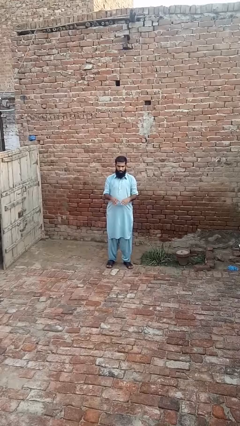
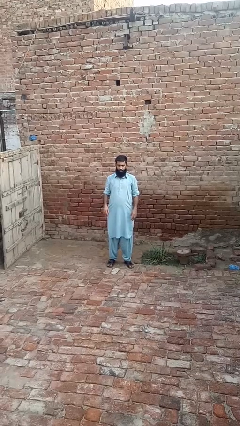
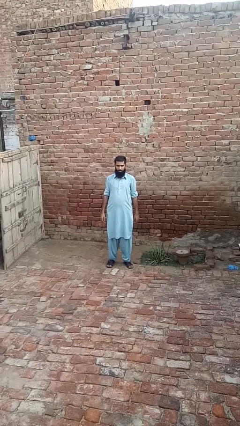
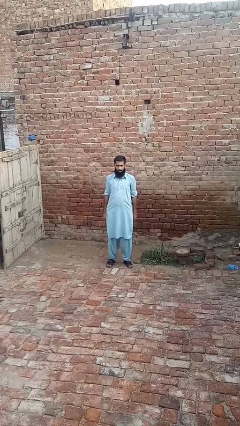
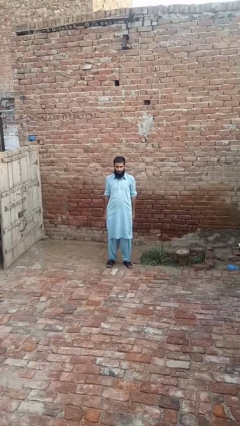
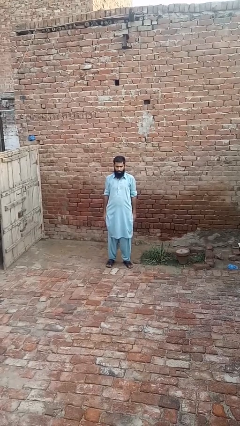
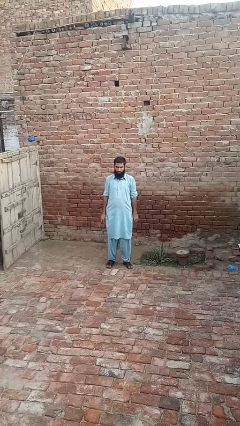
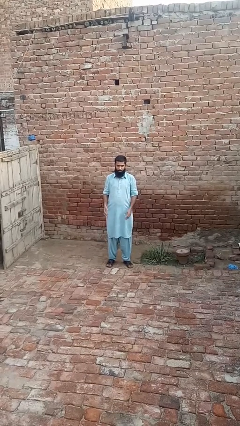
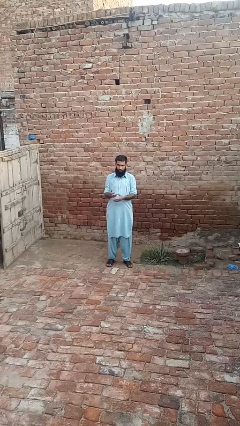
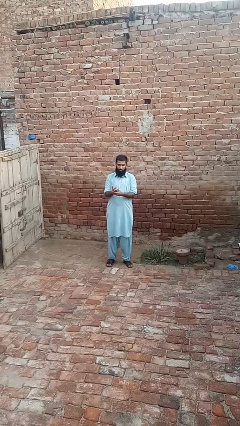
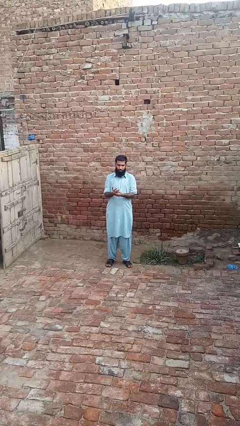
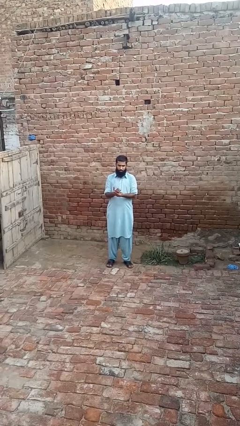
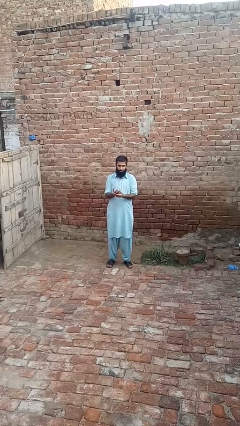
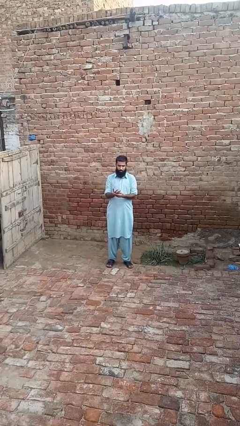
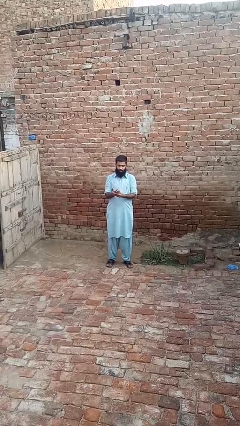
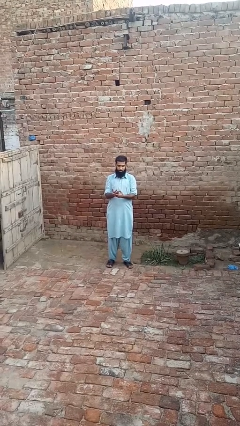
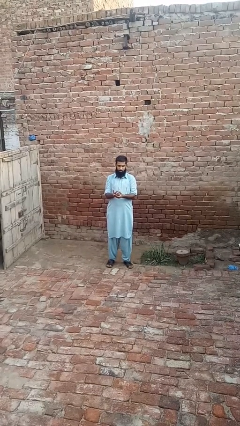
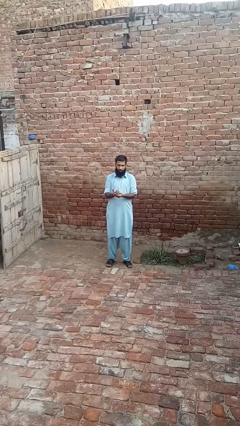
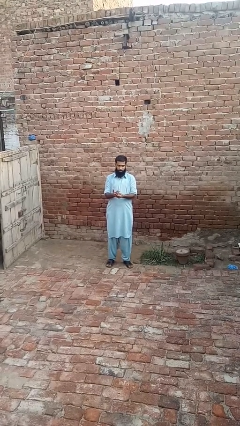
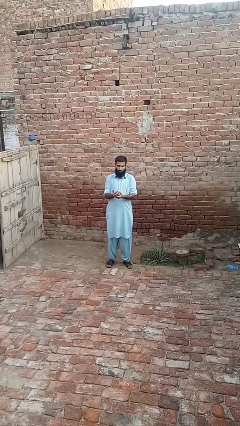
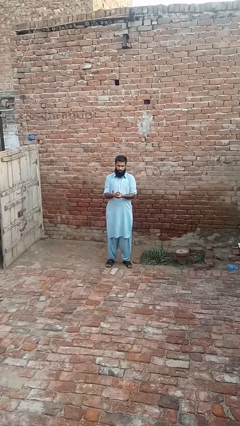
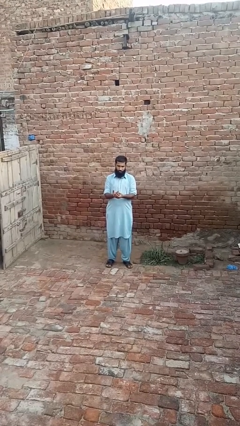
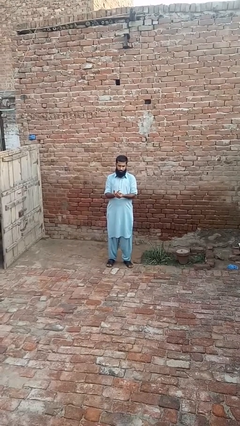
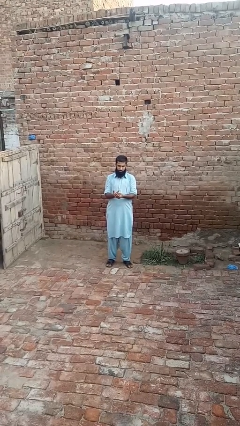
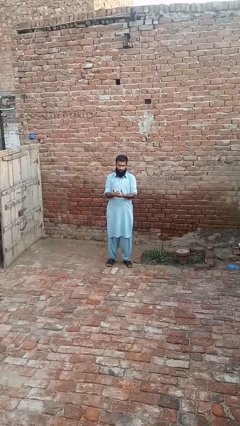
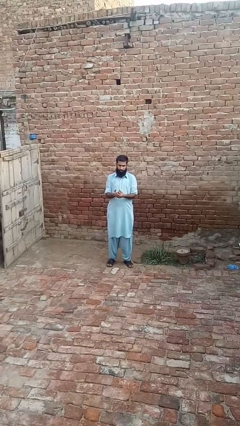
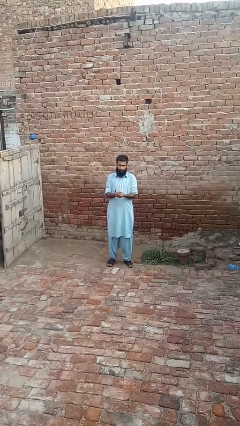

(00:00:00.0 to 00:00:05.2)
person cracks knuckles

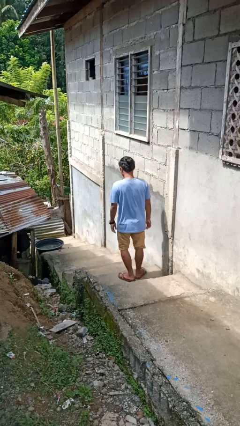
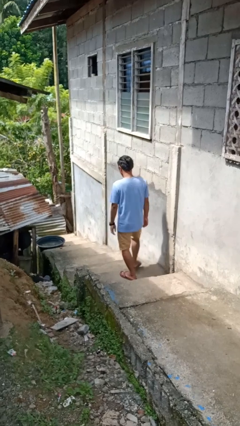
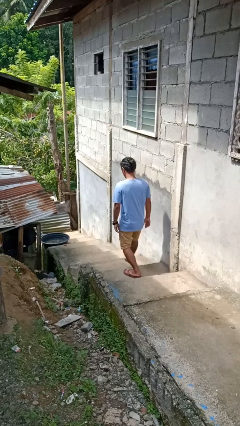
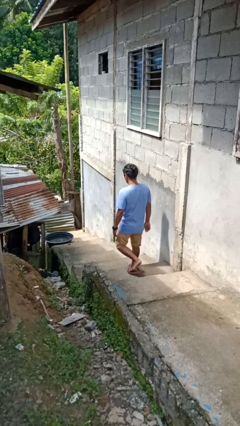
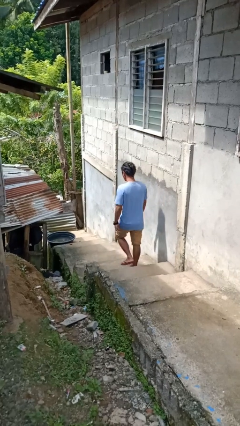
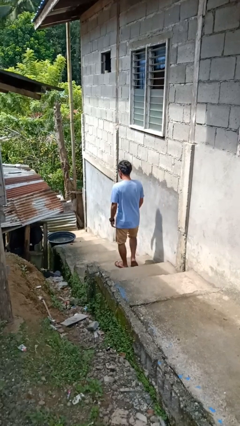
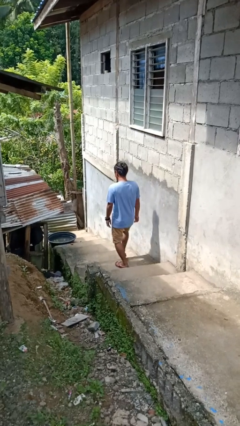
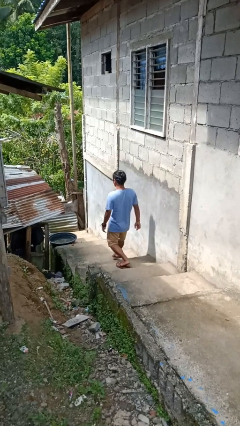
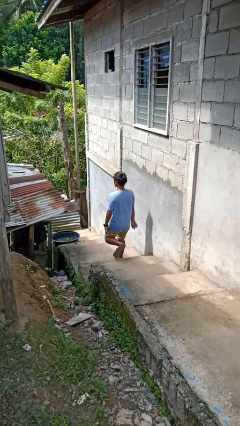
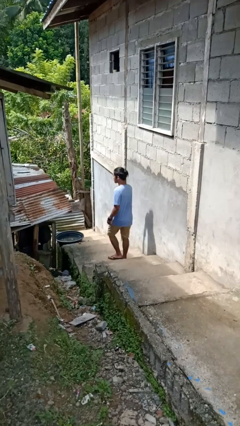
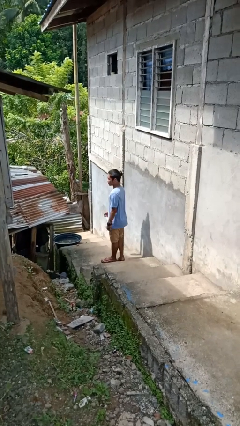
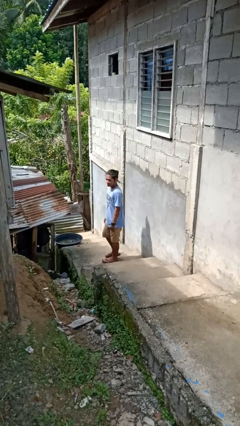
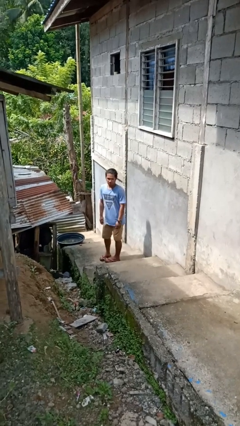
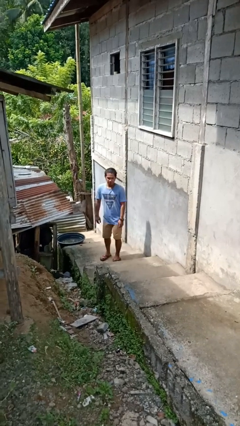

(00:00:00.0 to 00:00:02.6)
person climbs down stairs

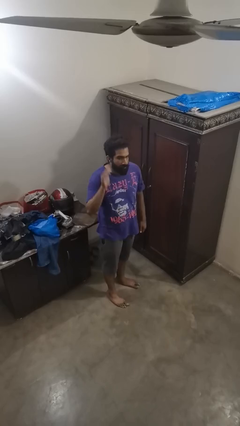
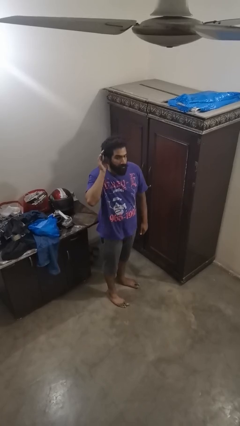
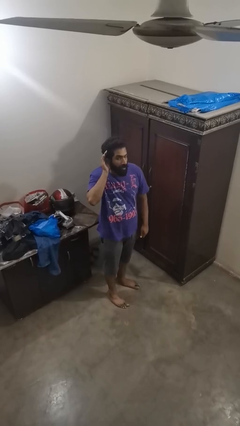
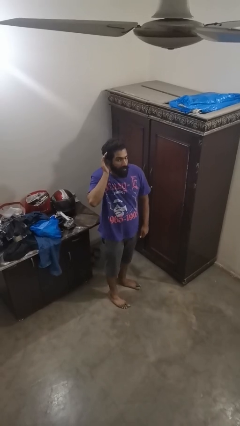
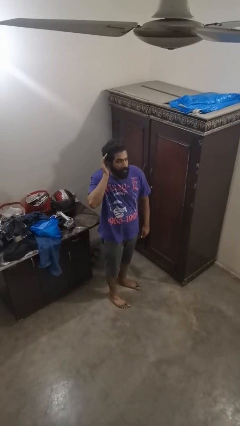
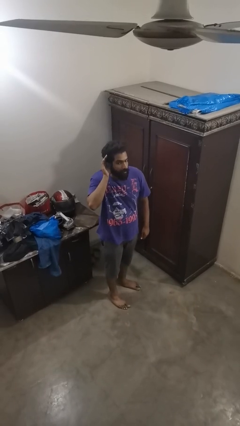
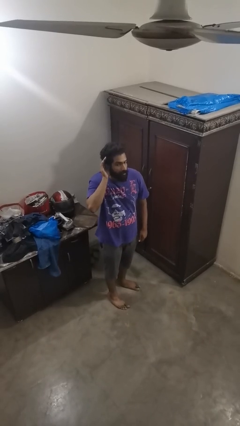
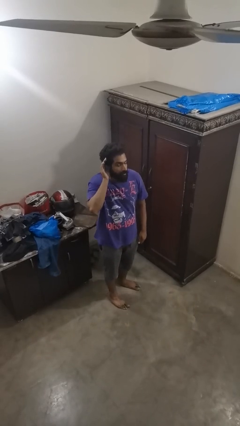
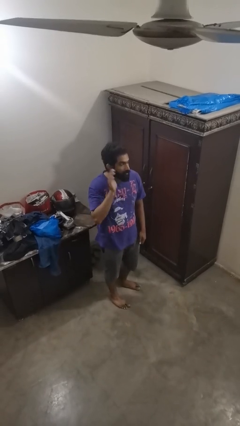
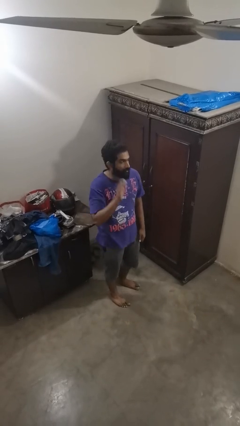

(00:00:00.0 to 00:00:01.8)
person gestures listen closely

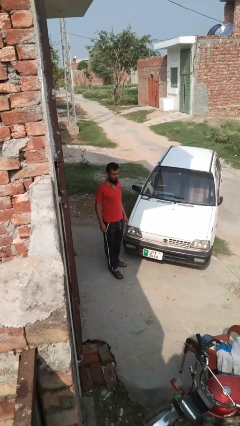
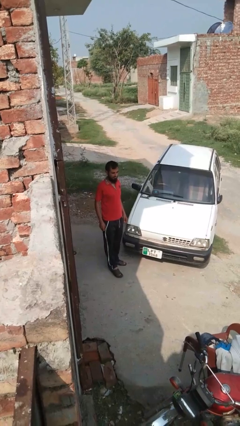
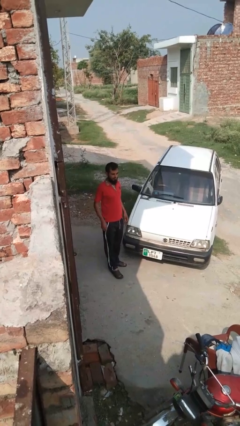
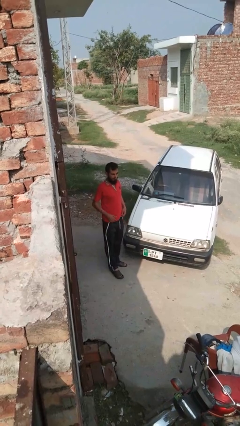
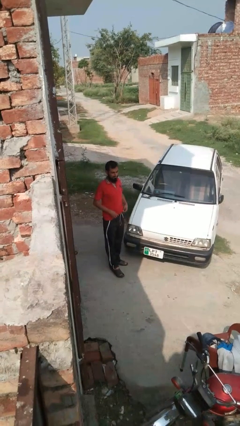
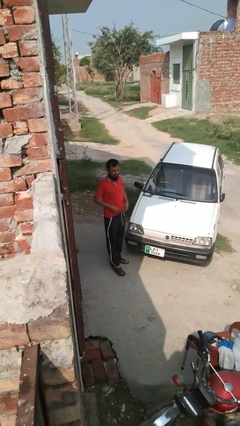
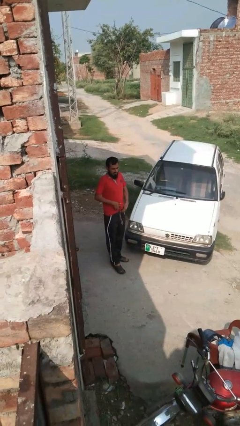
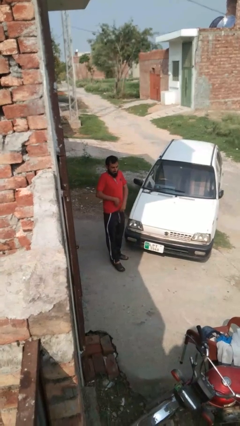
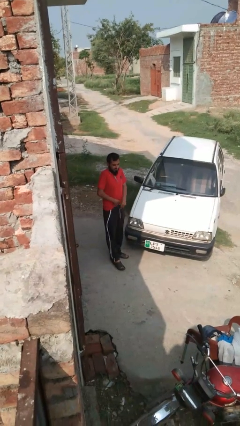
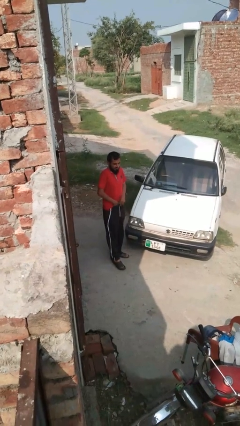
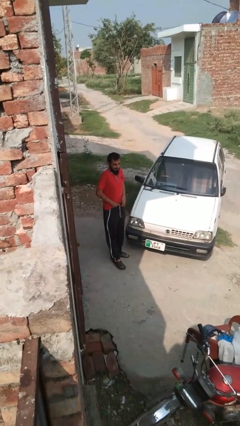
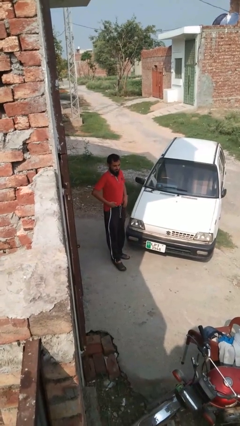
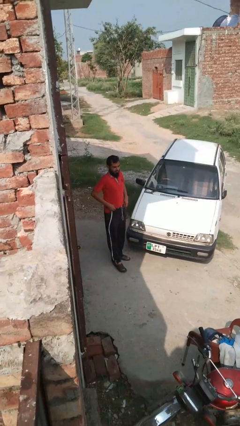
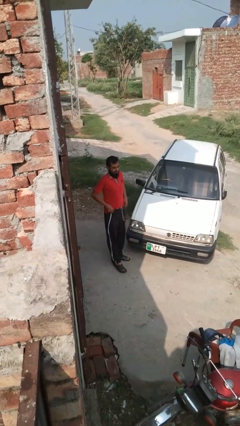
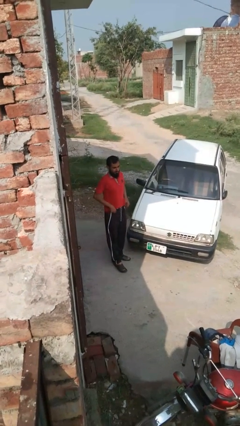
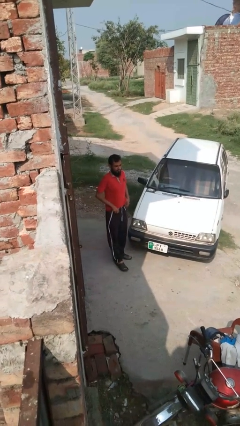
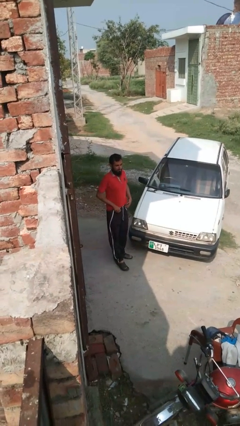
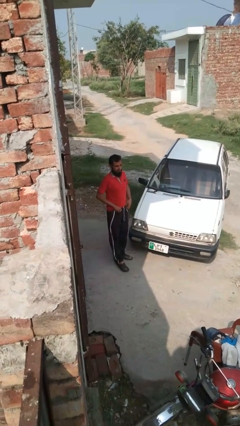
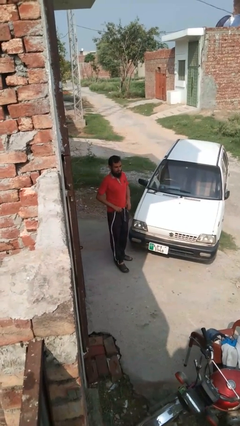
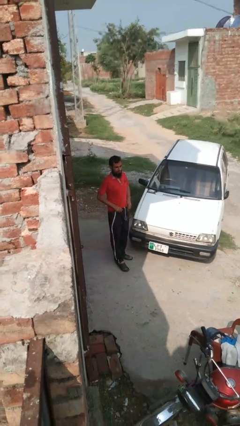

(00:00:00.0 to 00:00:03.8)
person tucks in shirt

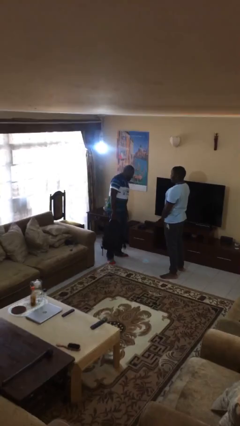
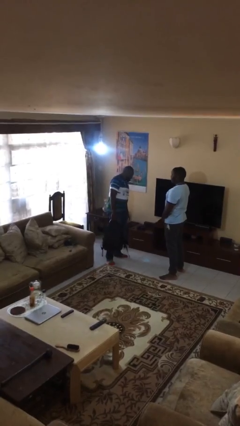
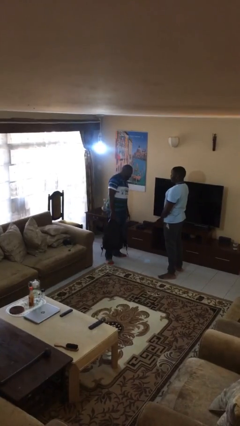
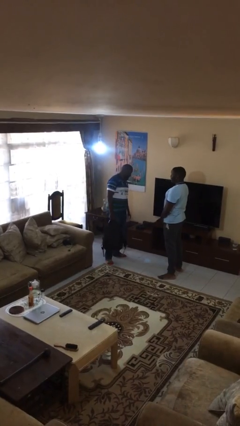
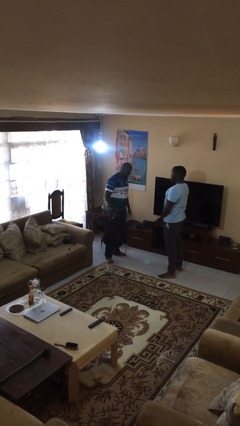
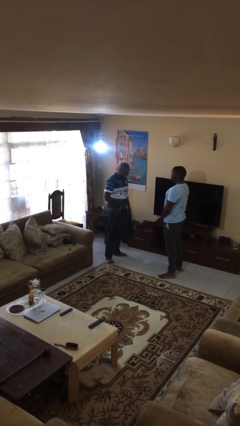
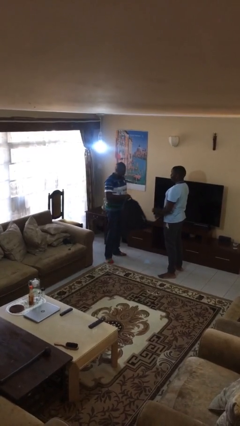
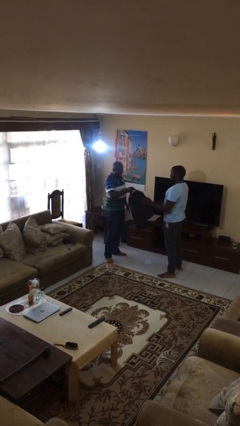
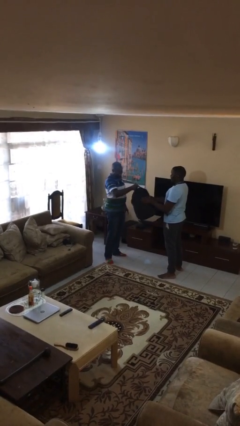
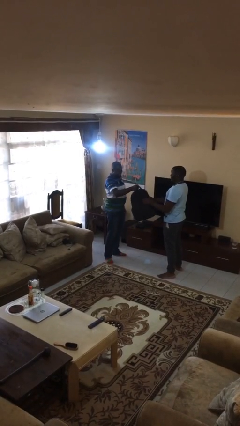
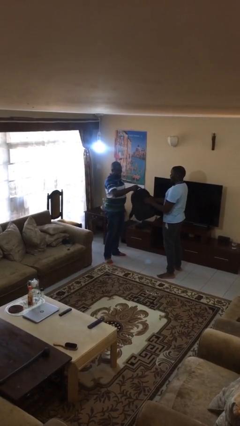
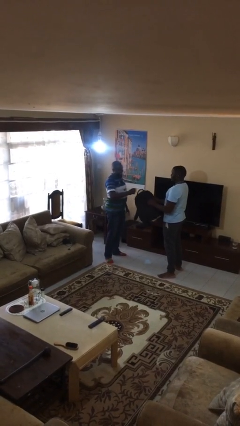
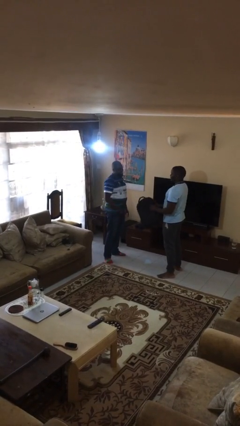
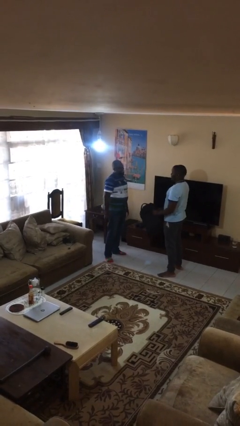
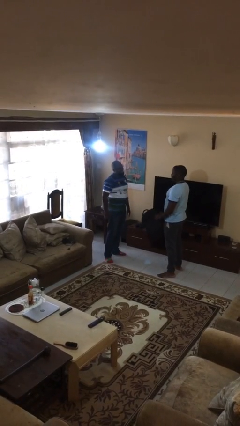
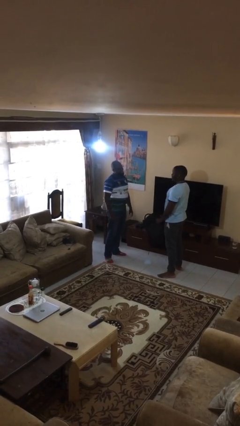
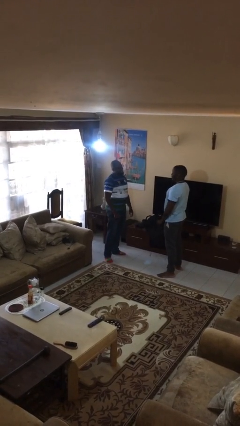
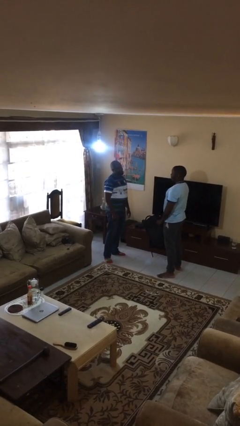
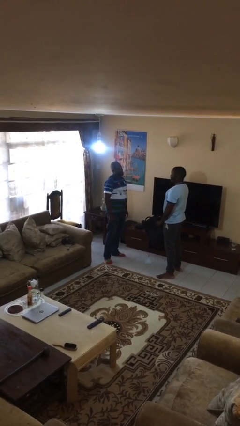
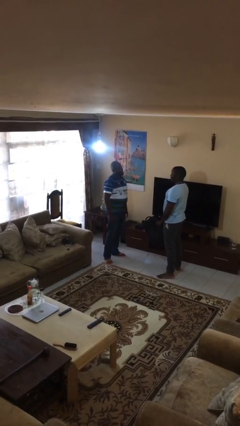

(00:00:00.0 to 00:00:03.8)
person transfers object to person
